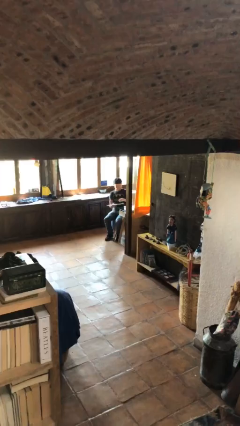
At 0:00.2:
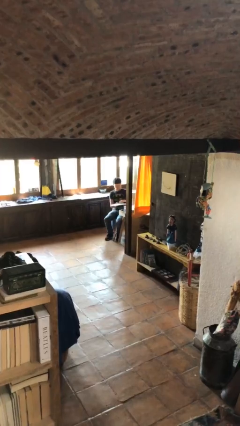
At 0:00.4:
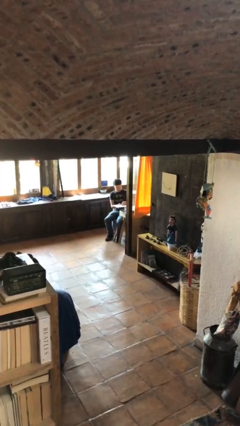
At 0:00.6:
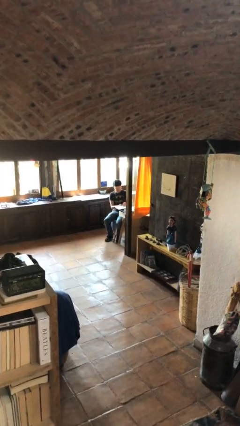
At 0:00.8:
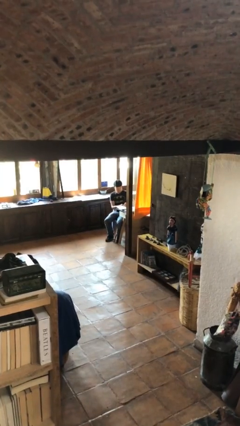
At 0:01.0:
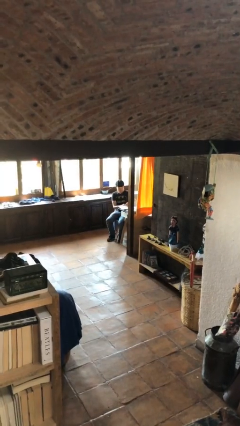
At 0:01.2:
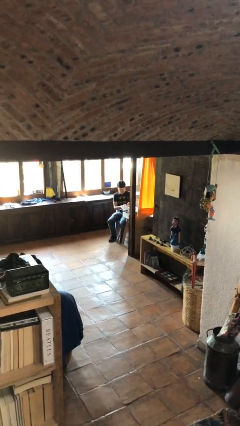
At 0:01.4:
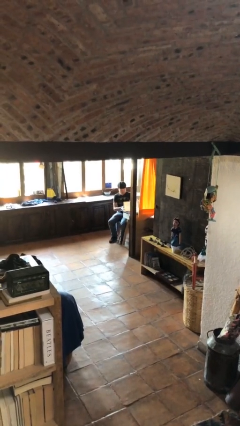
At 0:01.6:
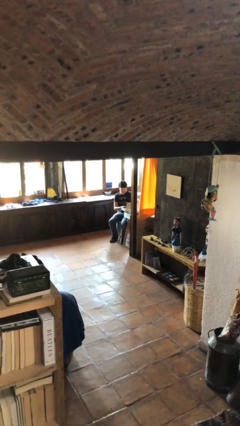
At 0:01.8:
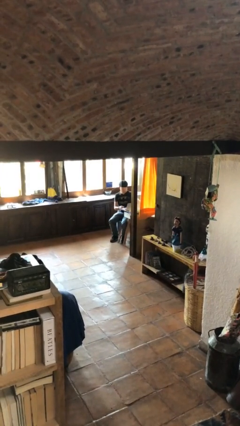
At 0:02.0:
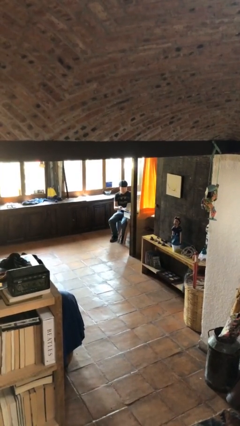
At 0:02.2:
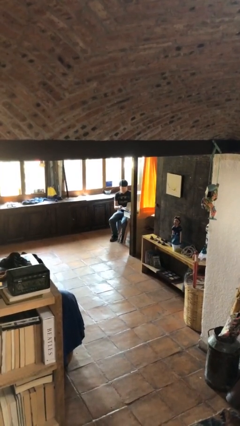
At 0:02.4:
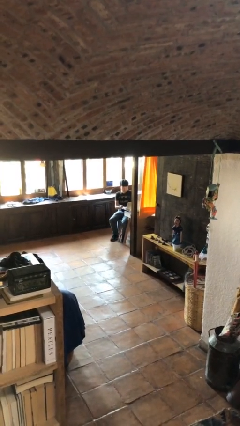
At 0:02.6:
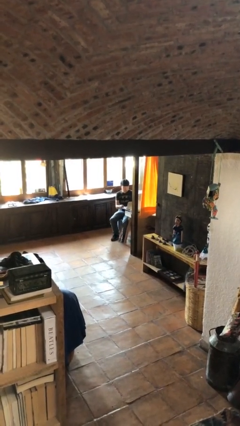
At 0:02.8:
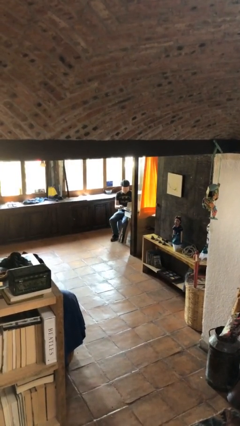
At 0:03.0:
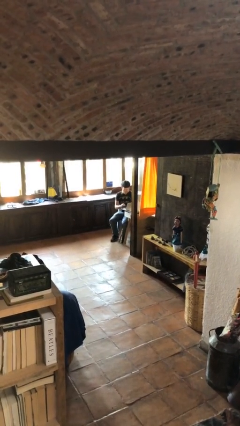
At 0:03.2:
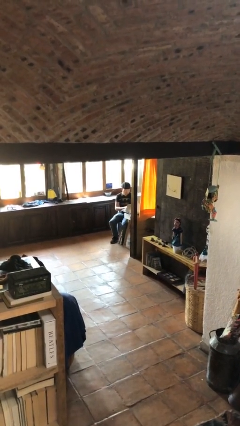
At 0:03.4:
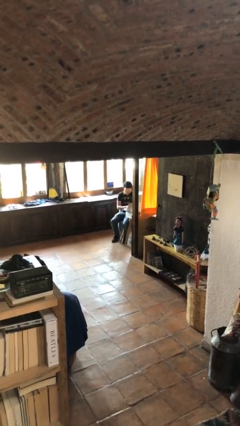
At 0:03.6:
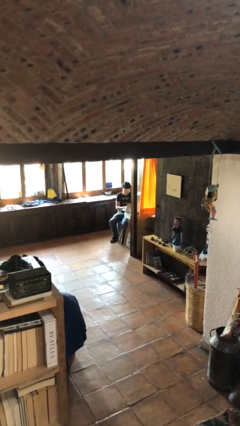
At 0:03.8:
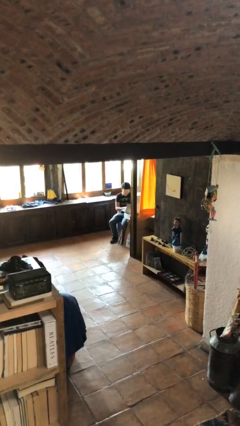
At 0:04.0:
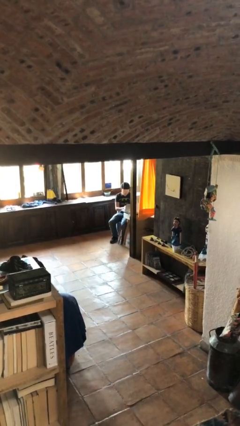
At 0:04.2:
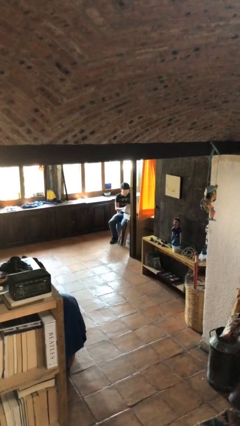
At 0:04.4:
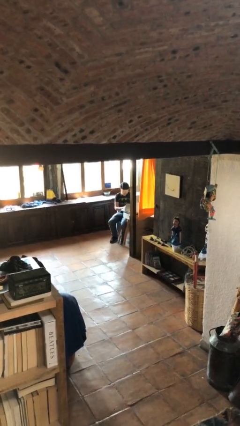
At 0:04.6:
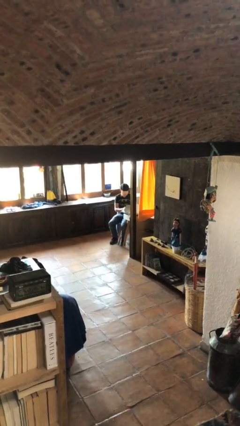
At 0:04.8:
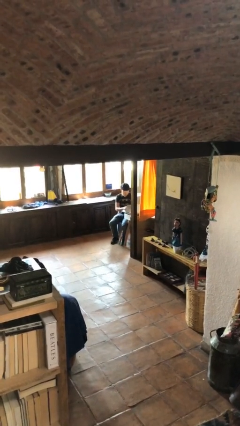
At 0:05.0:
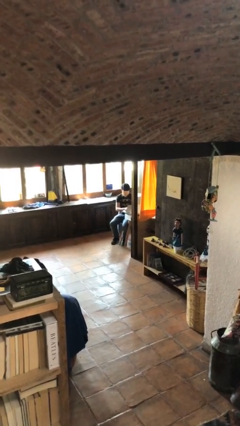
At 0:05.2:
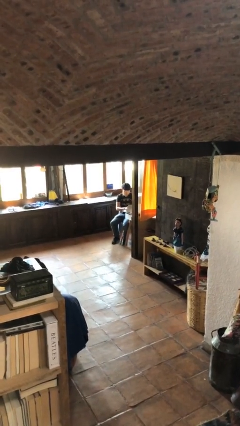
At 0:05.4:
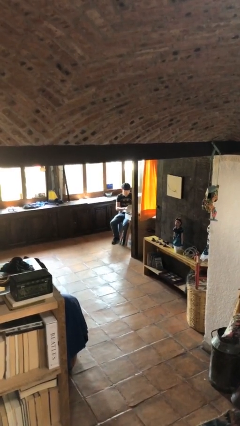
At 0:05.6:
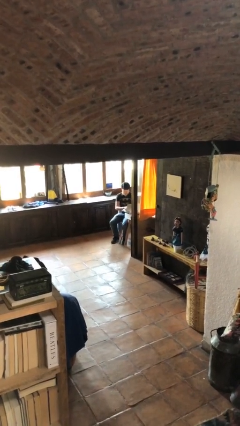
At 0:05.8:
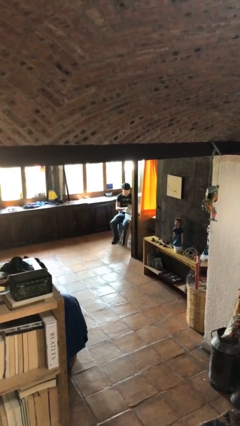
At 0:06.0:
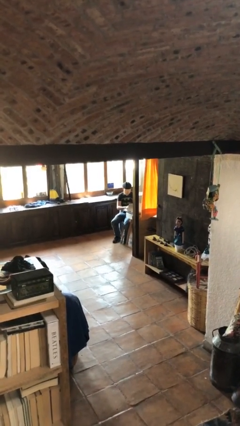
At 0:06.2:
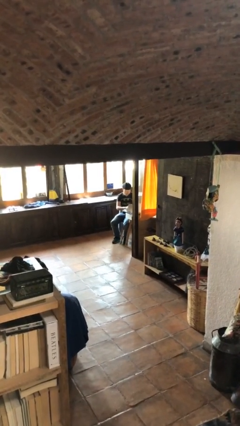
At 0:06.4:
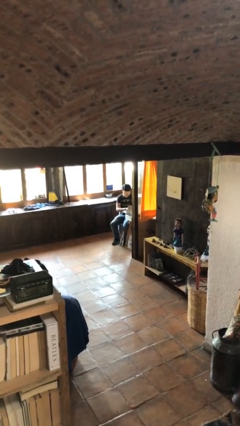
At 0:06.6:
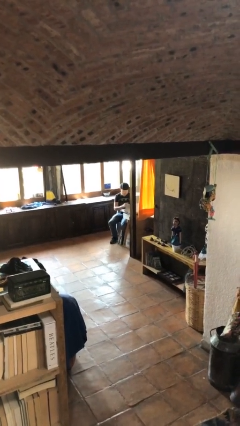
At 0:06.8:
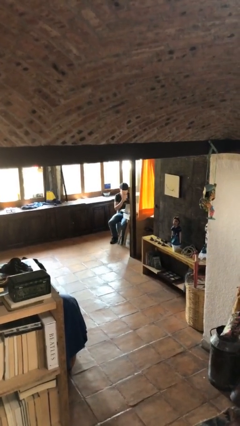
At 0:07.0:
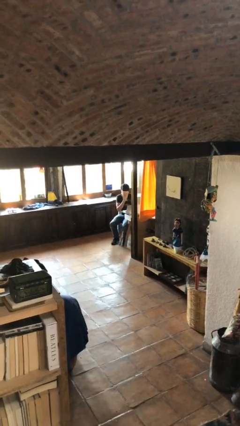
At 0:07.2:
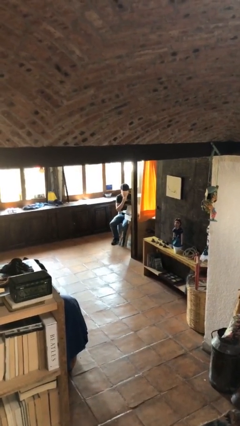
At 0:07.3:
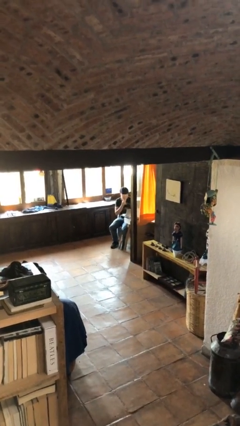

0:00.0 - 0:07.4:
person interacts with laptop

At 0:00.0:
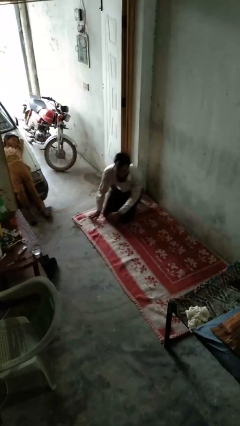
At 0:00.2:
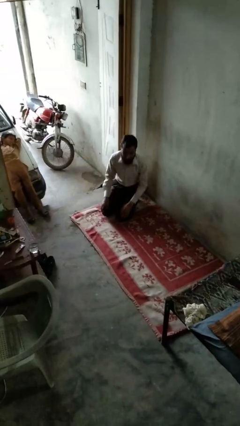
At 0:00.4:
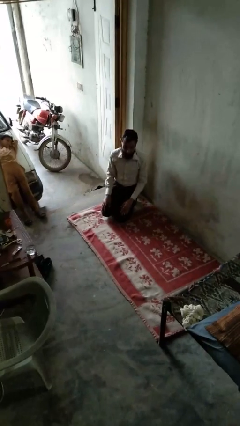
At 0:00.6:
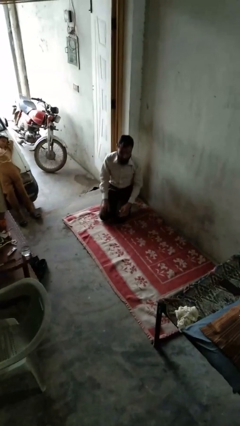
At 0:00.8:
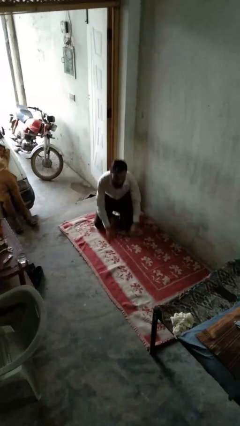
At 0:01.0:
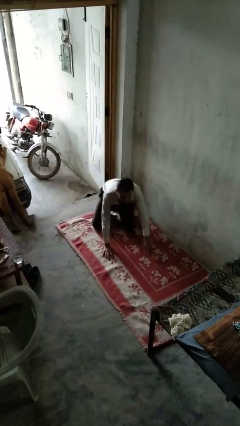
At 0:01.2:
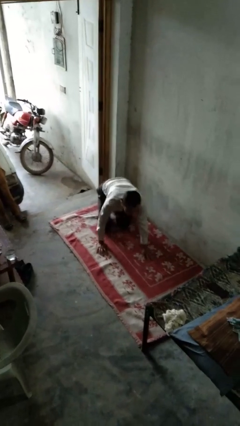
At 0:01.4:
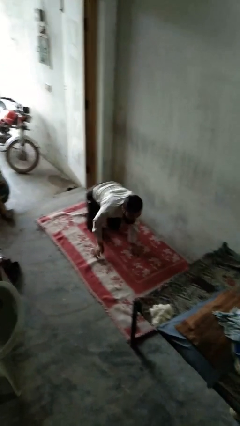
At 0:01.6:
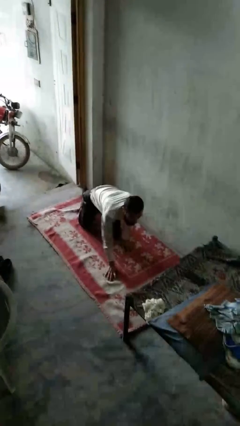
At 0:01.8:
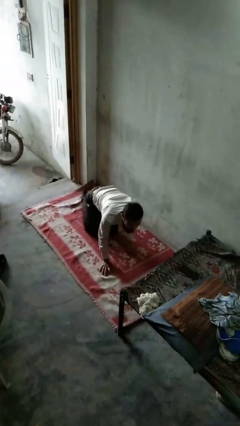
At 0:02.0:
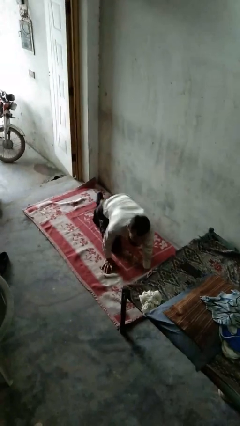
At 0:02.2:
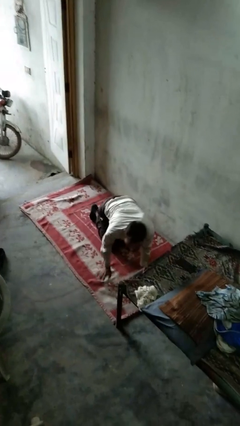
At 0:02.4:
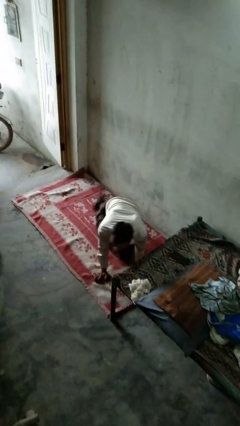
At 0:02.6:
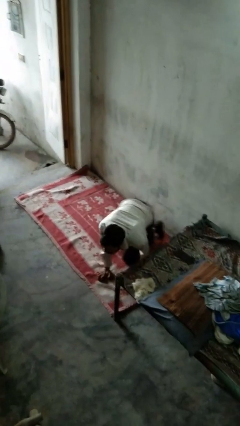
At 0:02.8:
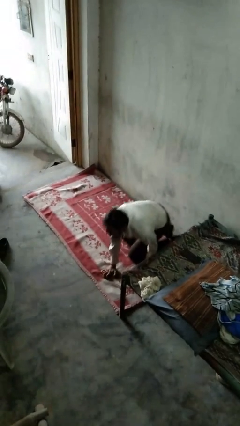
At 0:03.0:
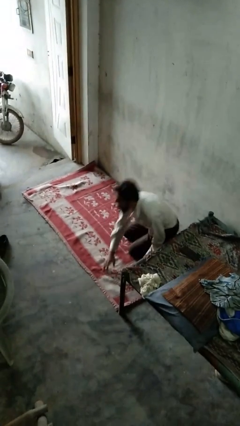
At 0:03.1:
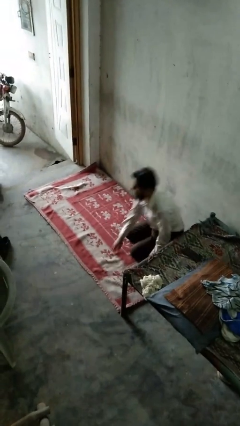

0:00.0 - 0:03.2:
person crawls

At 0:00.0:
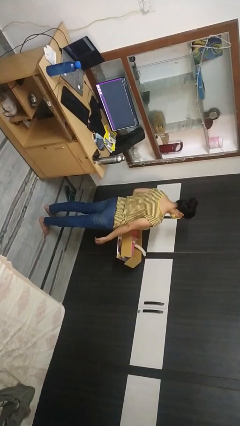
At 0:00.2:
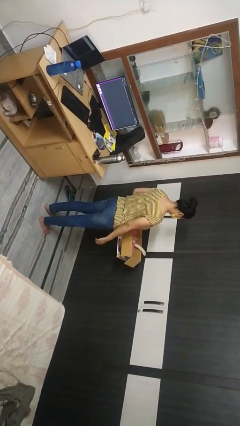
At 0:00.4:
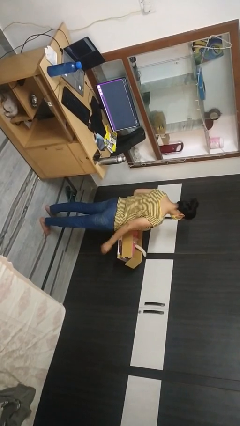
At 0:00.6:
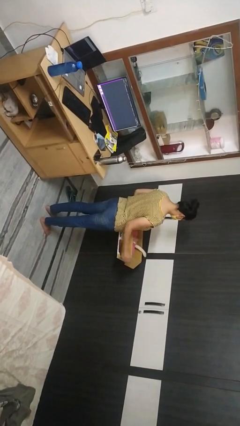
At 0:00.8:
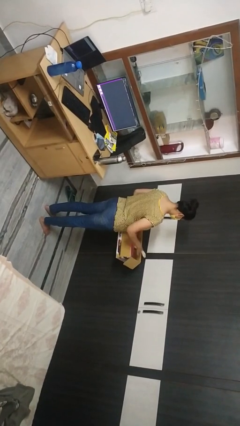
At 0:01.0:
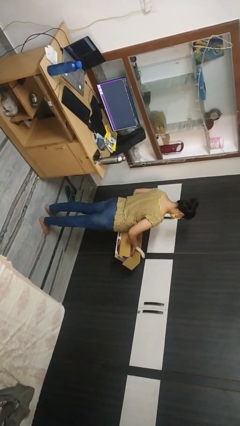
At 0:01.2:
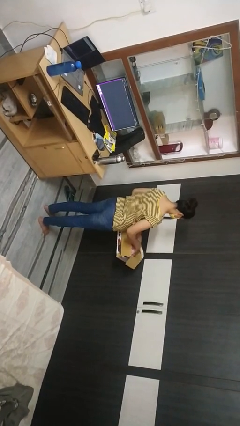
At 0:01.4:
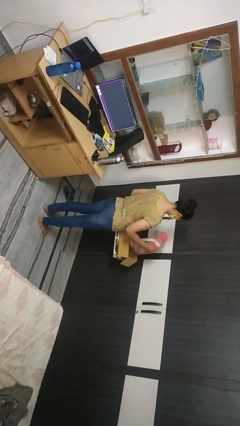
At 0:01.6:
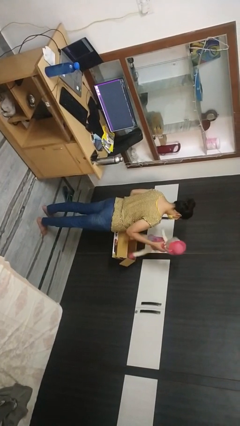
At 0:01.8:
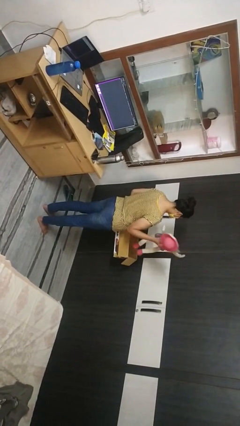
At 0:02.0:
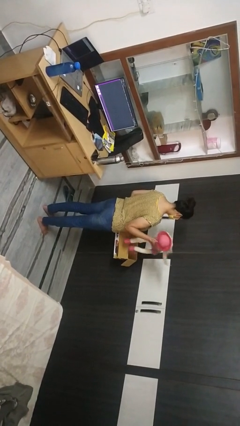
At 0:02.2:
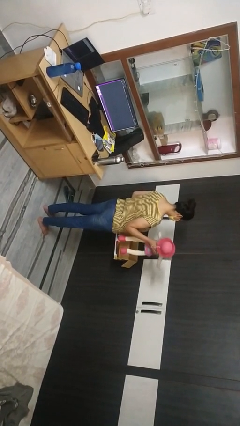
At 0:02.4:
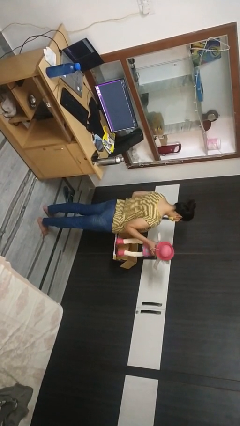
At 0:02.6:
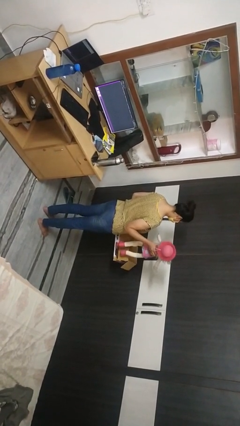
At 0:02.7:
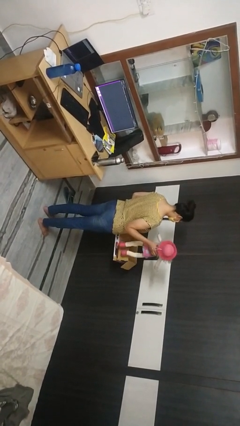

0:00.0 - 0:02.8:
person takes object from box

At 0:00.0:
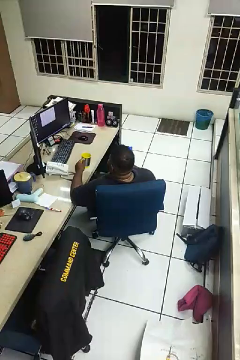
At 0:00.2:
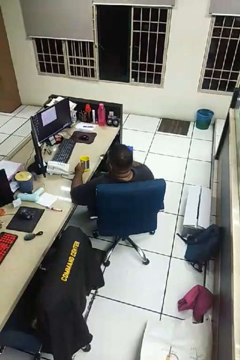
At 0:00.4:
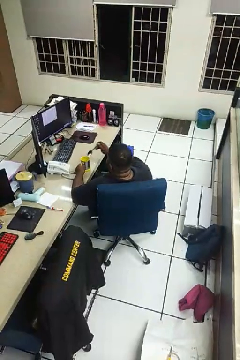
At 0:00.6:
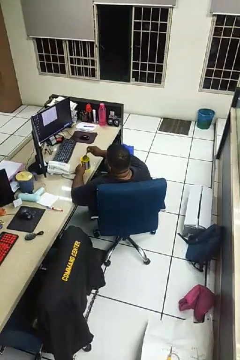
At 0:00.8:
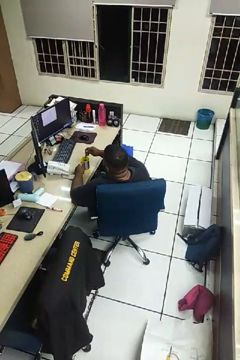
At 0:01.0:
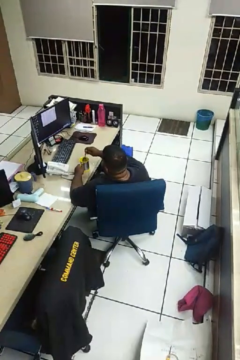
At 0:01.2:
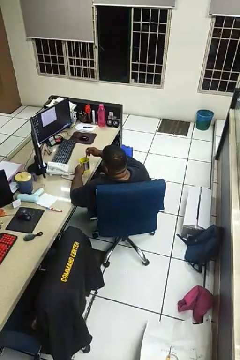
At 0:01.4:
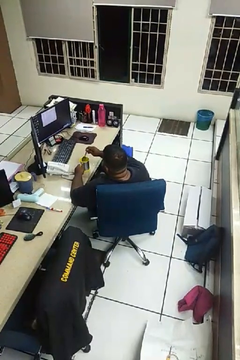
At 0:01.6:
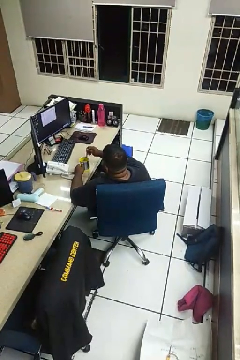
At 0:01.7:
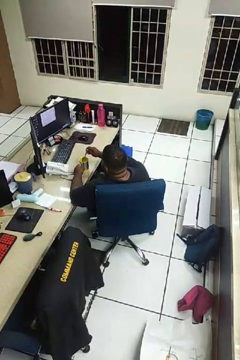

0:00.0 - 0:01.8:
person stirs mug

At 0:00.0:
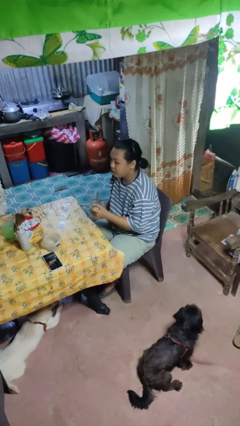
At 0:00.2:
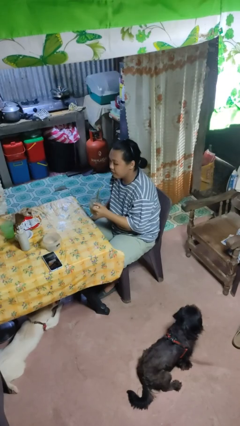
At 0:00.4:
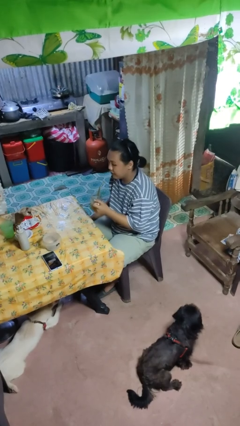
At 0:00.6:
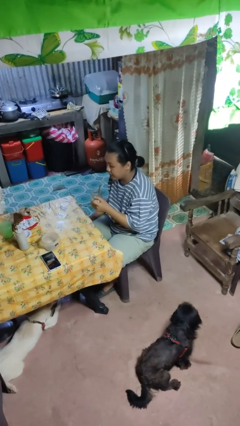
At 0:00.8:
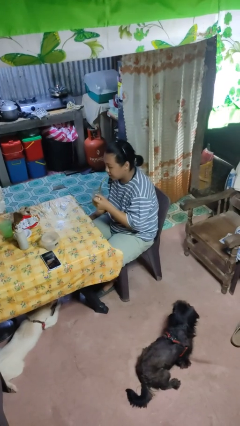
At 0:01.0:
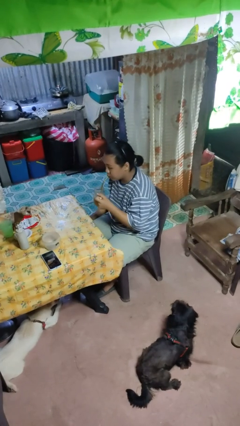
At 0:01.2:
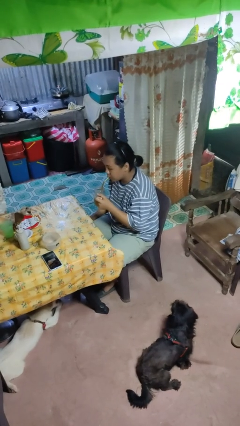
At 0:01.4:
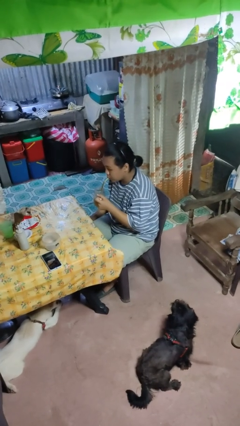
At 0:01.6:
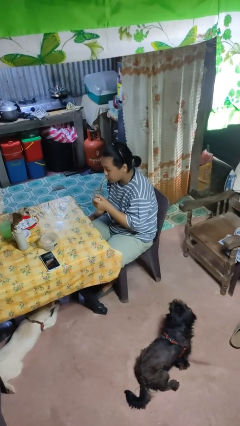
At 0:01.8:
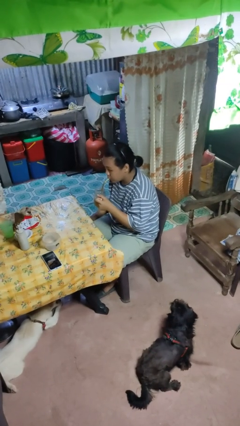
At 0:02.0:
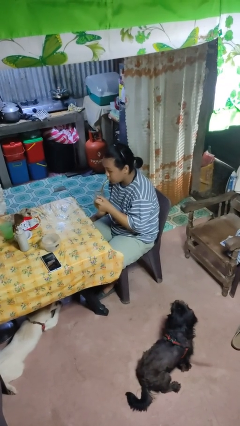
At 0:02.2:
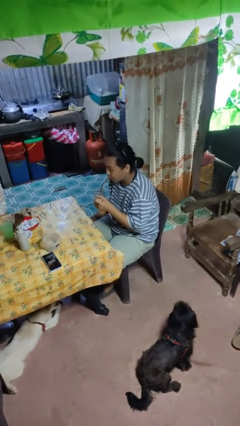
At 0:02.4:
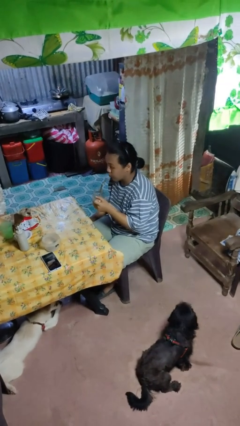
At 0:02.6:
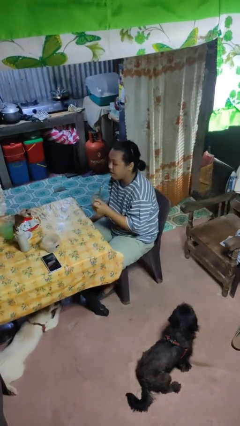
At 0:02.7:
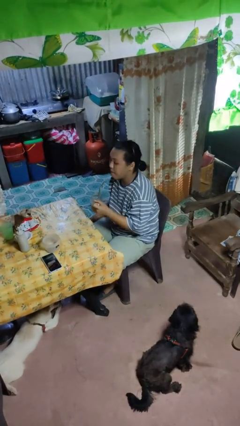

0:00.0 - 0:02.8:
person drinks from straw

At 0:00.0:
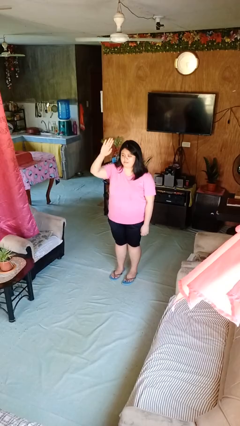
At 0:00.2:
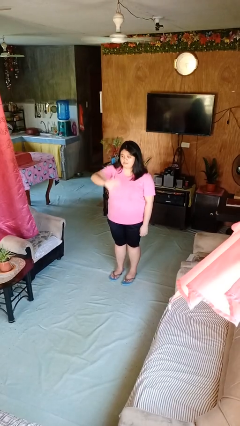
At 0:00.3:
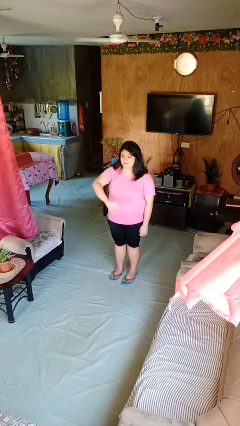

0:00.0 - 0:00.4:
person gestures swipe down
